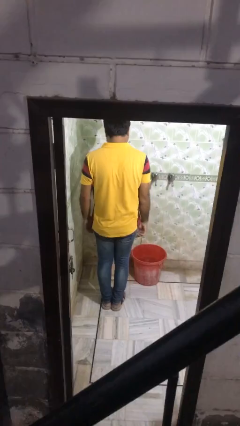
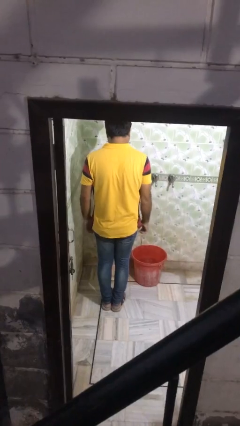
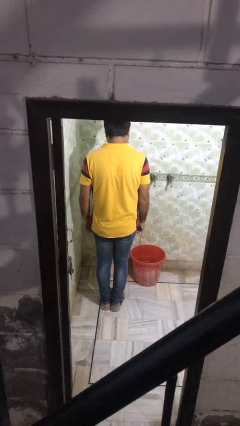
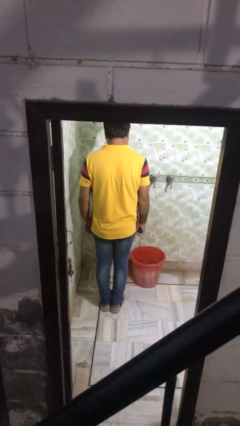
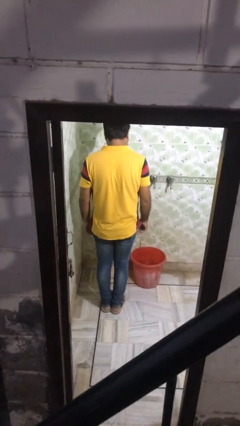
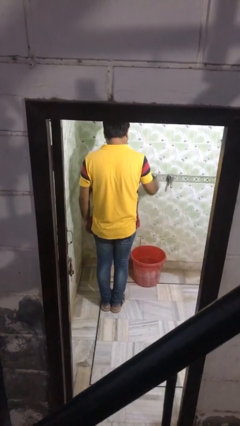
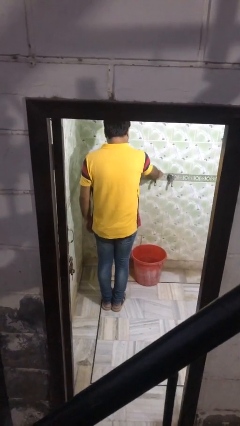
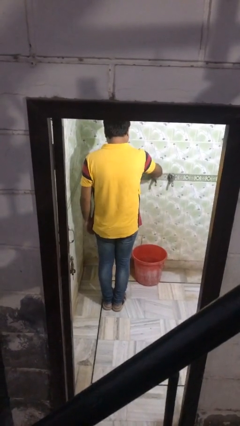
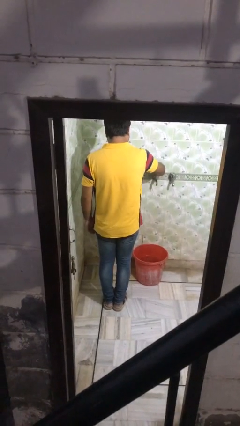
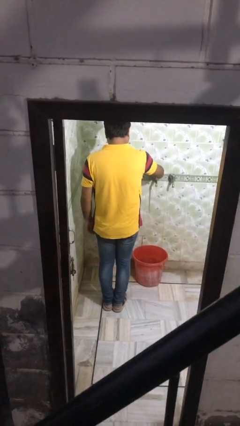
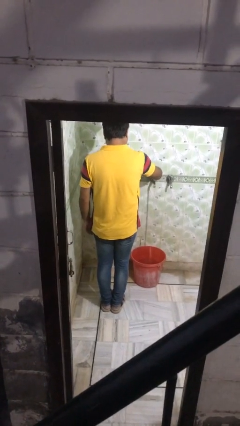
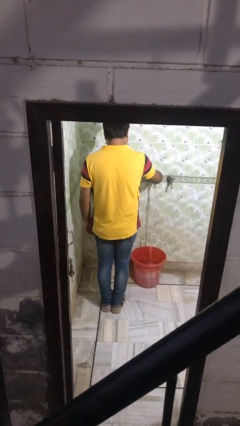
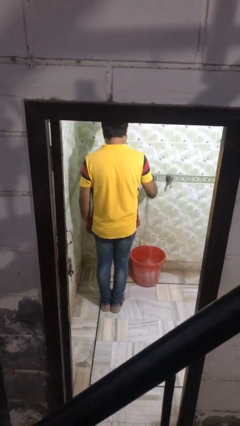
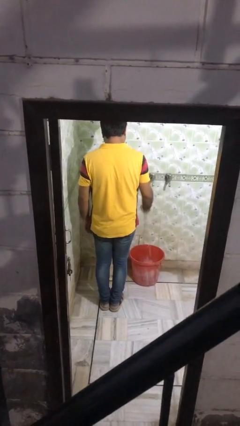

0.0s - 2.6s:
person turns on faucet

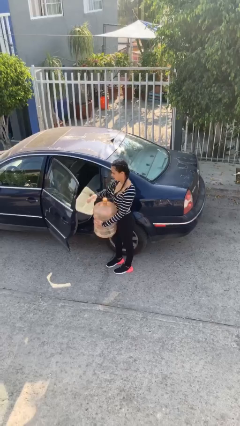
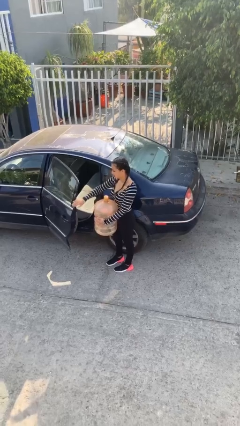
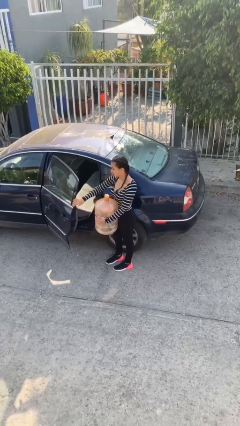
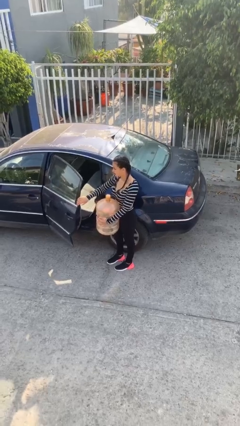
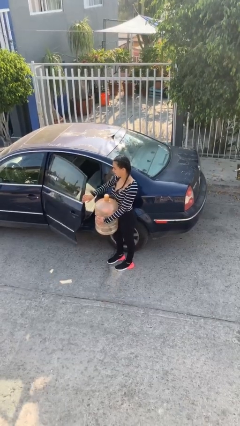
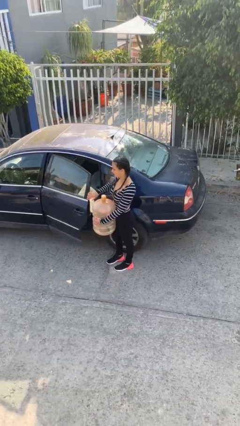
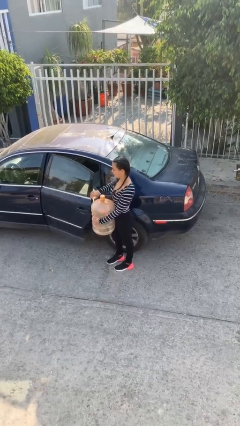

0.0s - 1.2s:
person closes car door

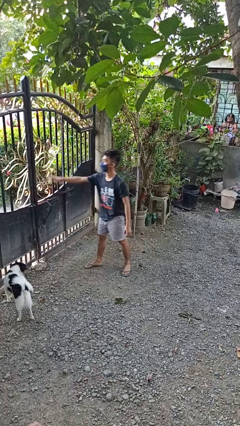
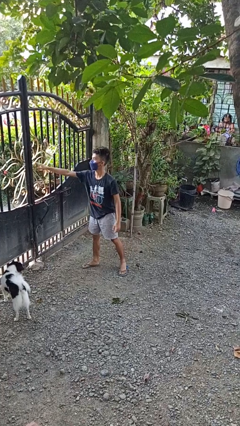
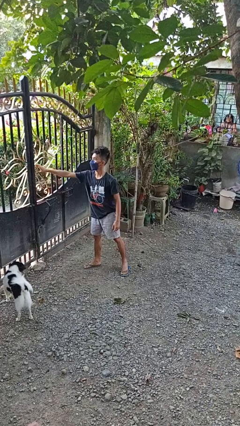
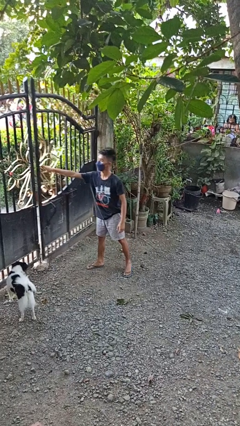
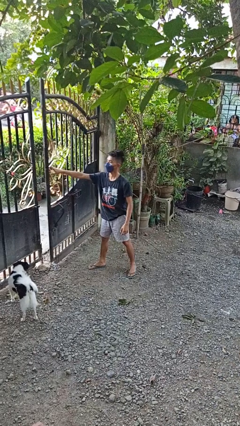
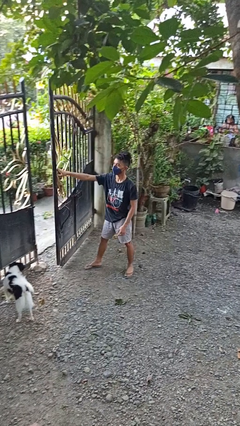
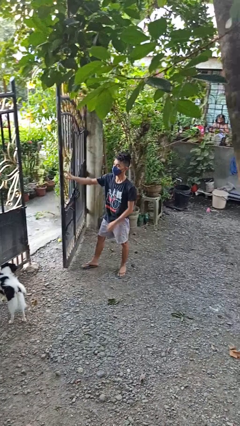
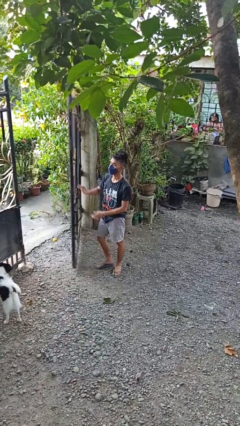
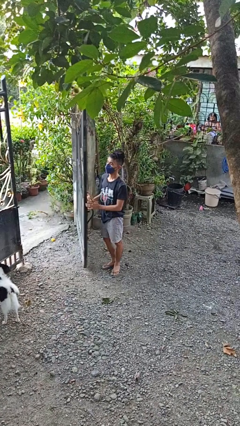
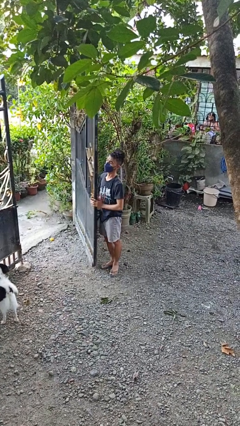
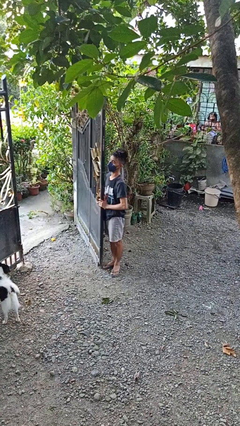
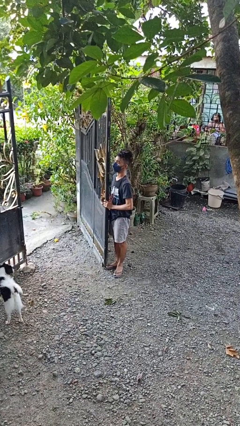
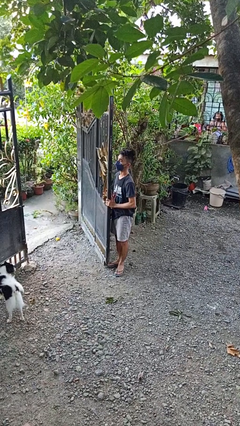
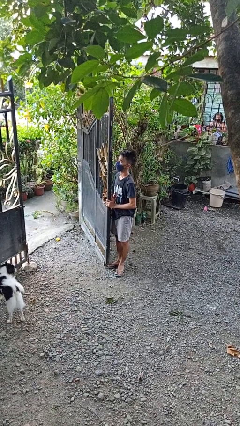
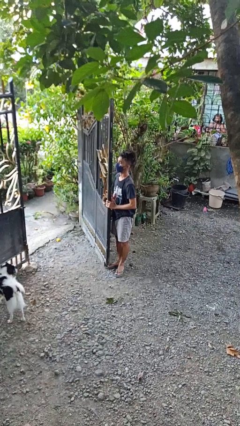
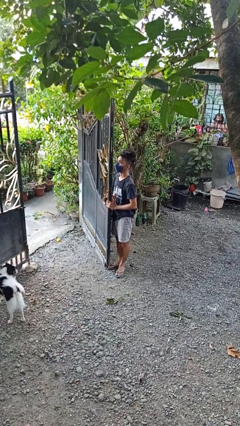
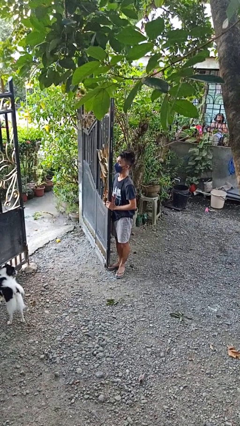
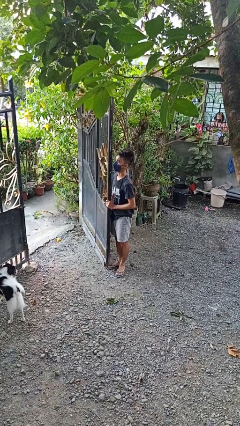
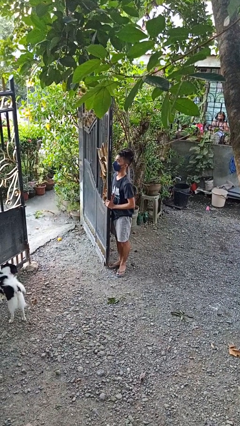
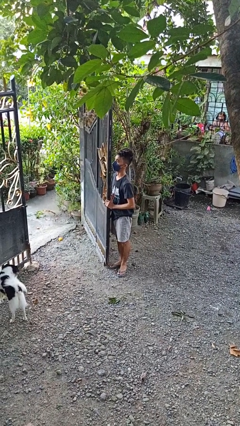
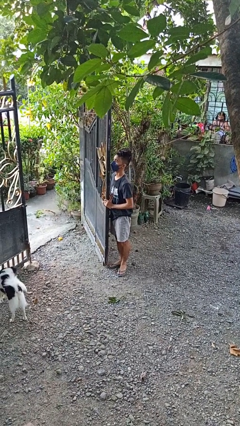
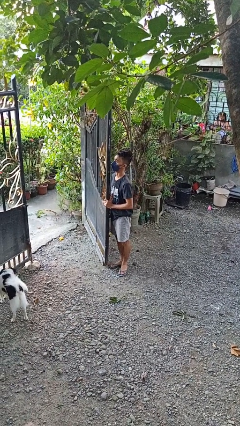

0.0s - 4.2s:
person opens gate

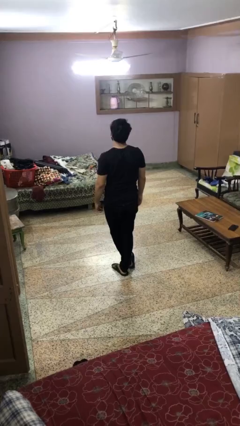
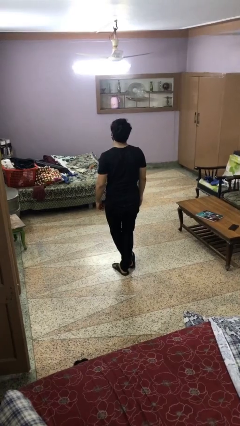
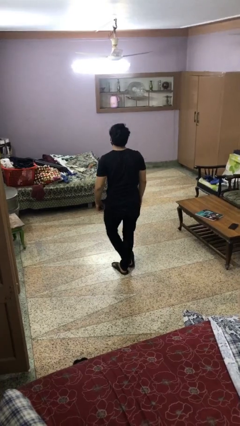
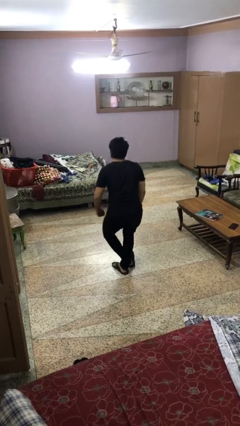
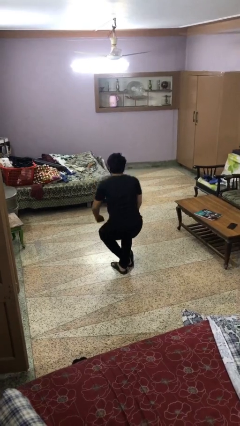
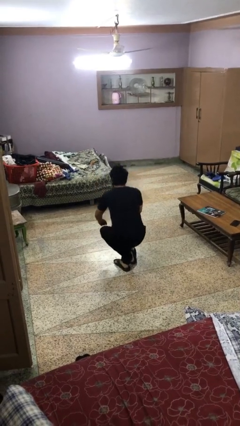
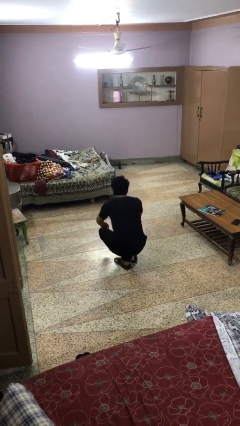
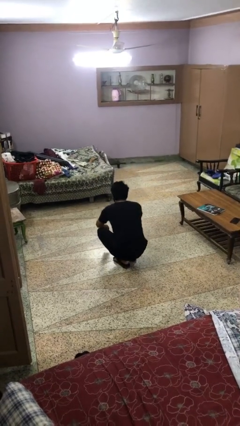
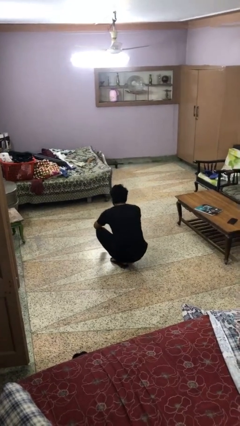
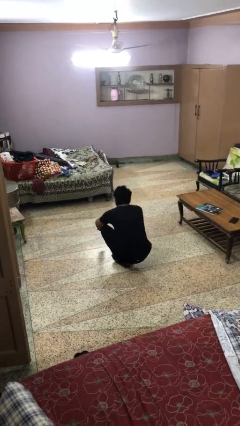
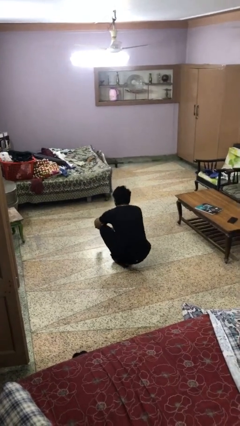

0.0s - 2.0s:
person sits crisscross

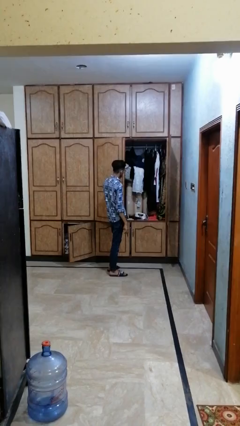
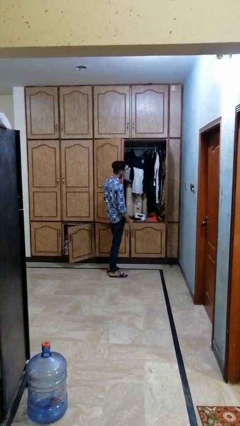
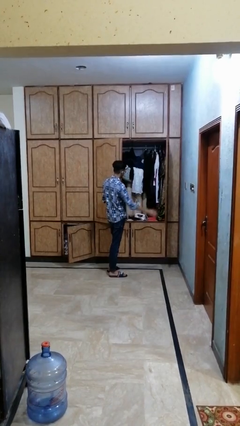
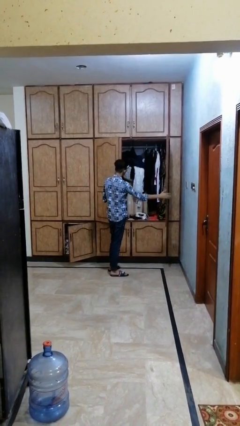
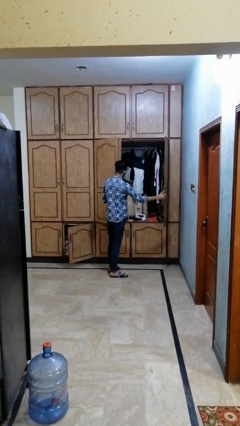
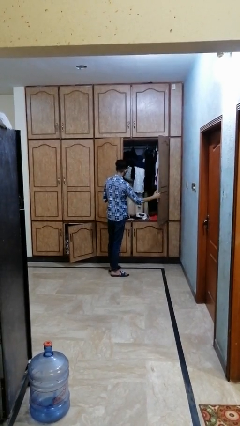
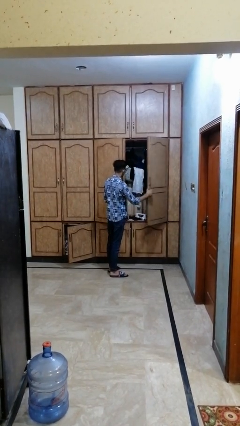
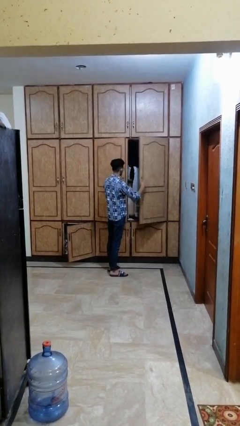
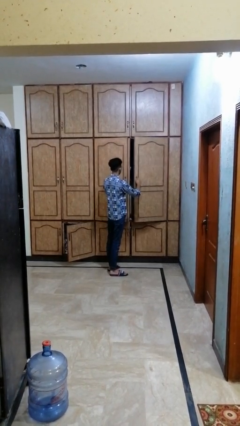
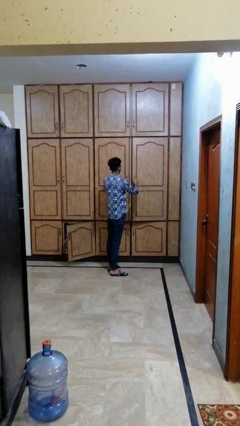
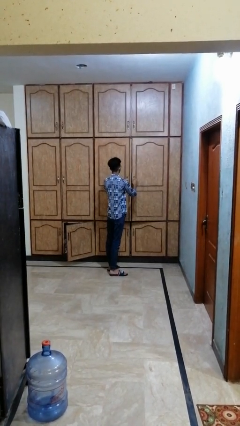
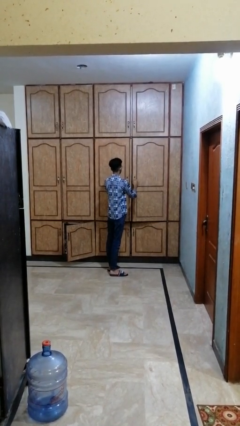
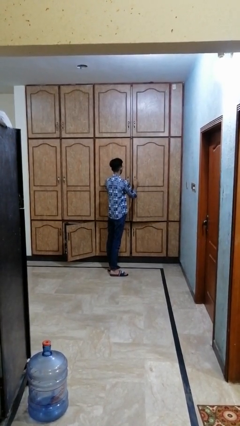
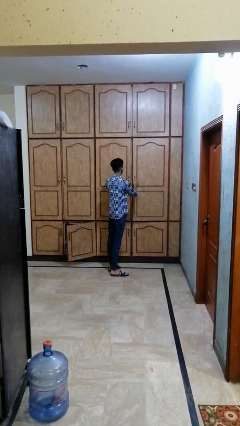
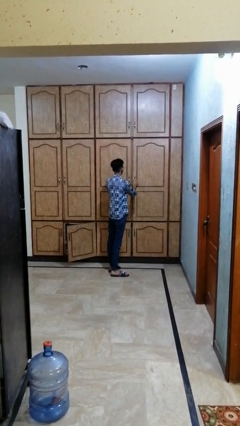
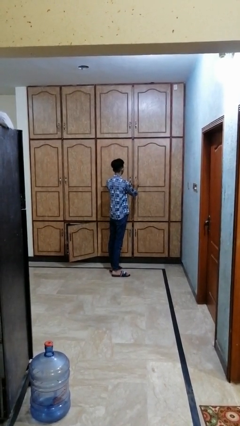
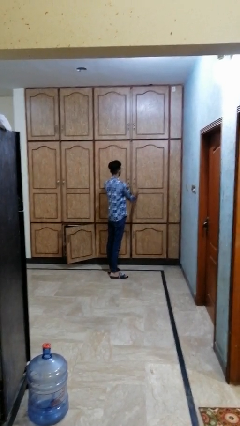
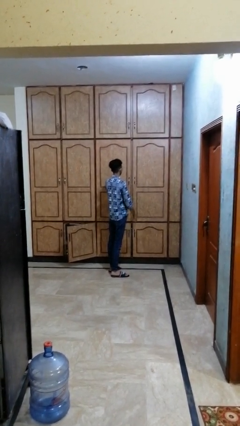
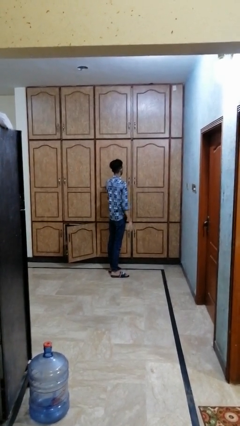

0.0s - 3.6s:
person closes dresser drawer

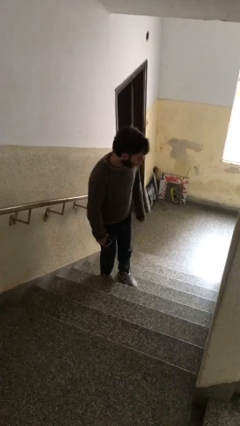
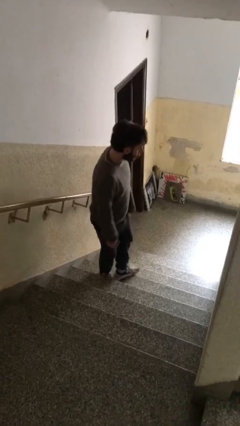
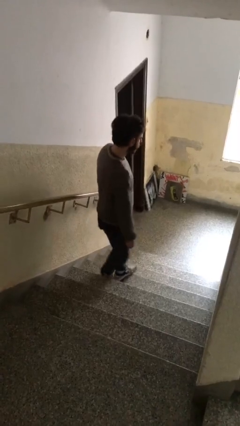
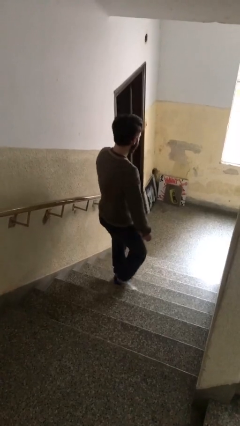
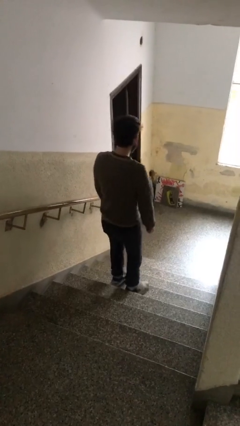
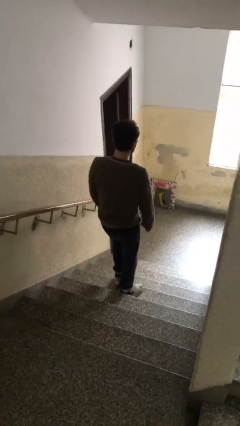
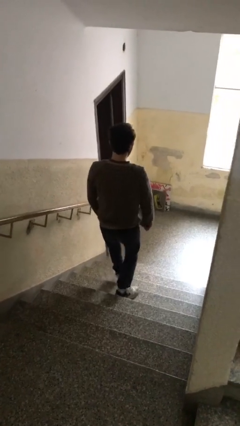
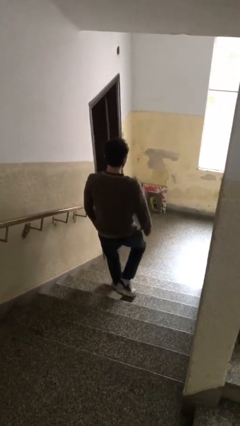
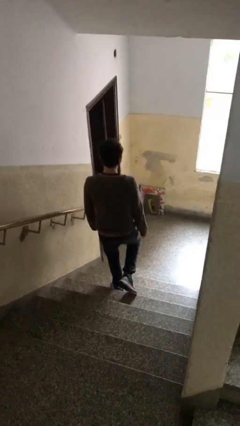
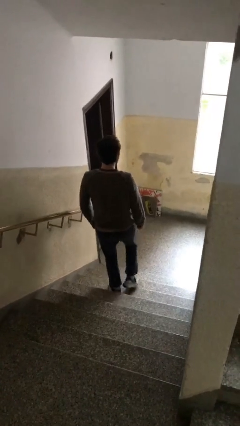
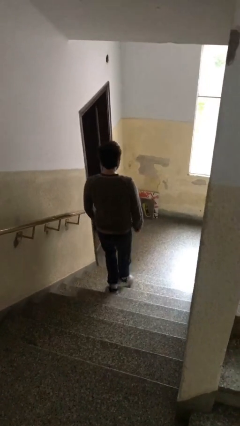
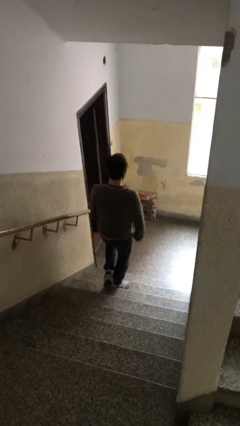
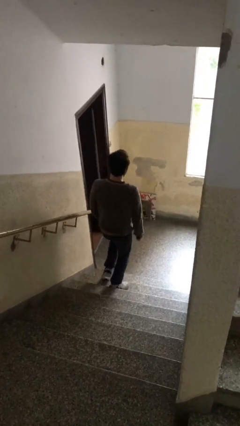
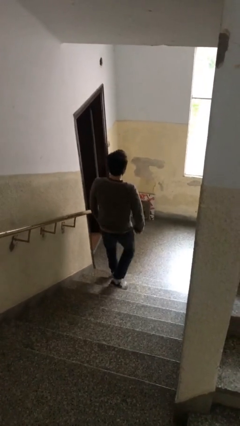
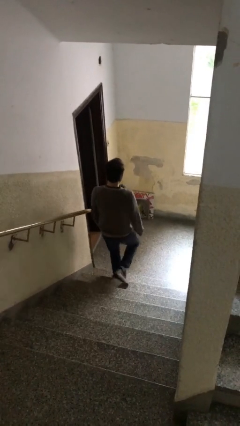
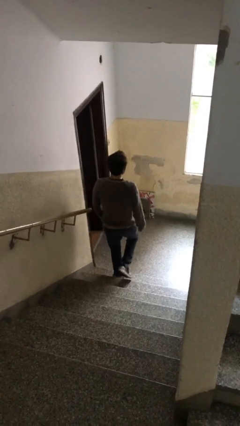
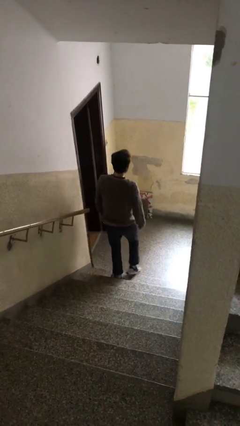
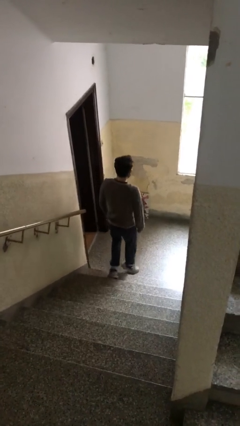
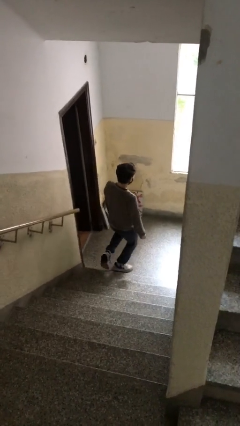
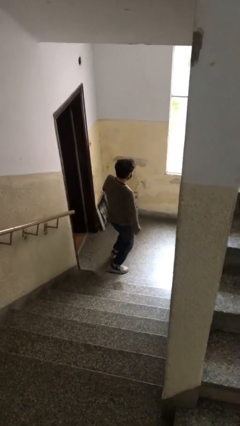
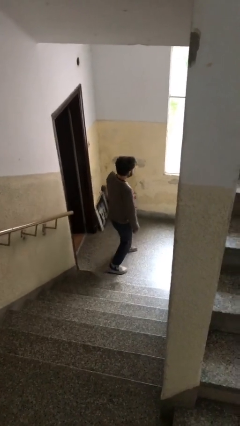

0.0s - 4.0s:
person climbs down stairs
